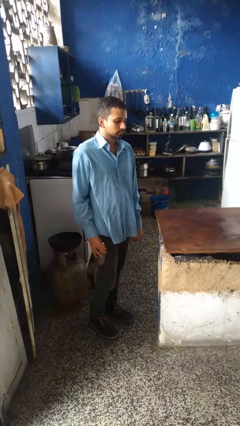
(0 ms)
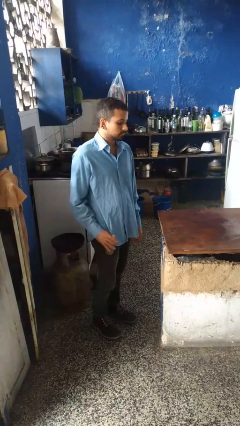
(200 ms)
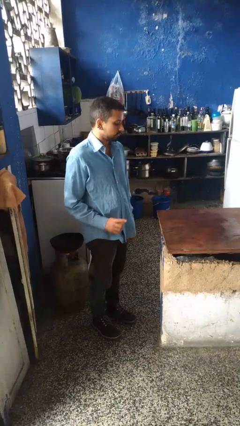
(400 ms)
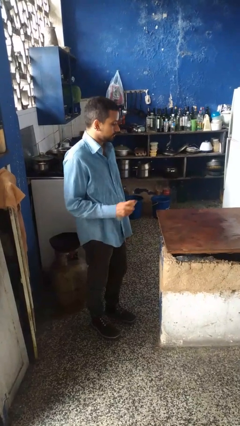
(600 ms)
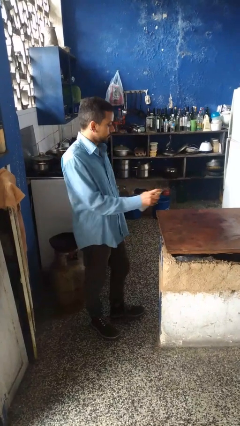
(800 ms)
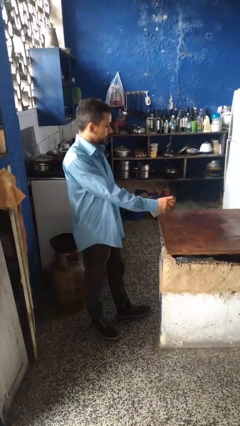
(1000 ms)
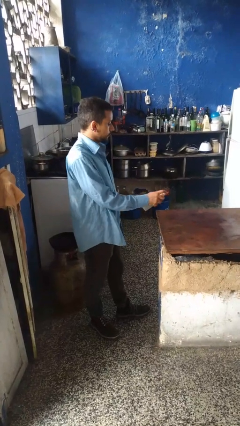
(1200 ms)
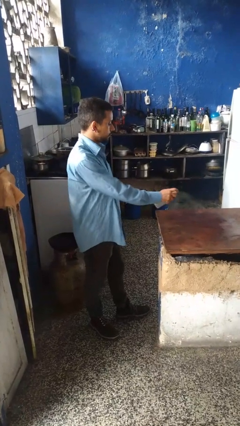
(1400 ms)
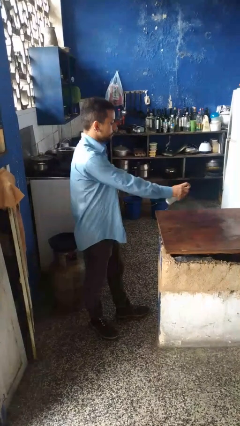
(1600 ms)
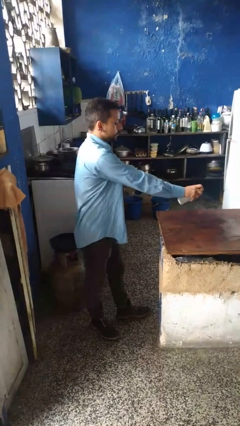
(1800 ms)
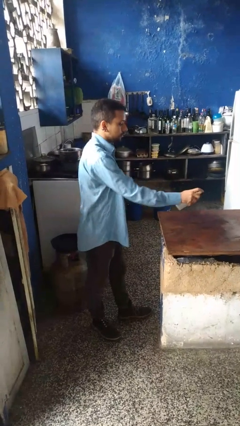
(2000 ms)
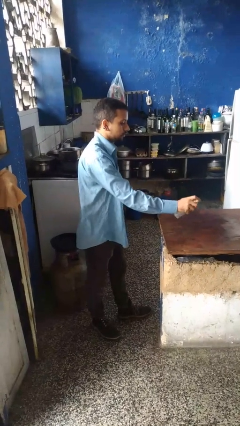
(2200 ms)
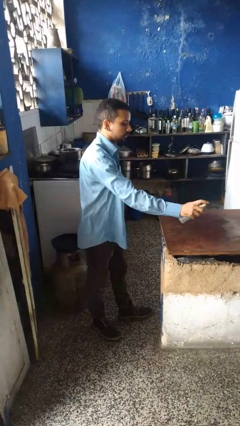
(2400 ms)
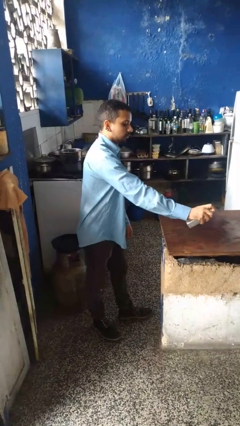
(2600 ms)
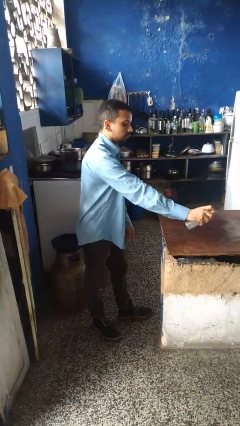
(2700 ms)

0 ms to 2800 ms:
person sprays from bottle

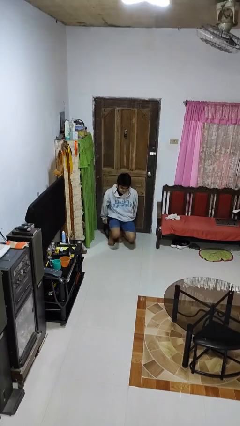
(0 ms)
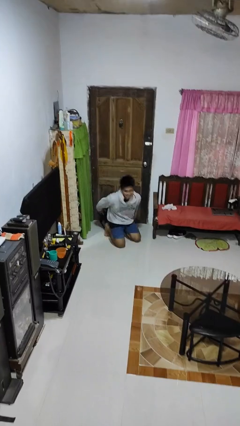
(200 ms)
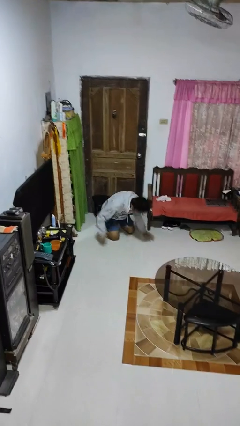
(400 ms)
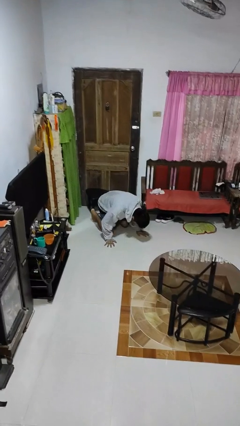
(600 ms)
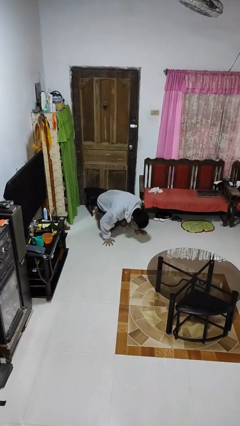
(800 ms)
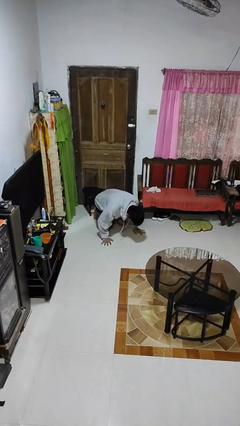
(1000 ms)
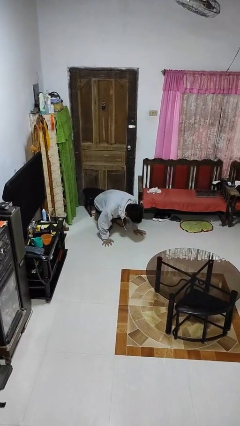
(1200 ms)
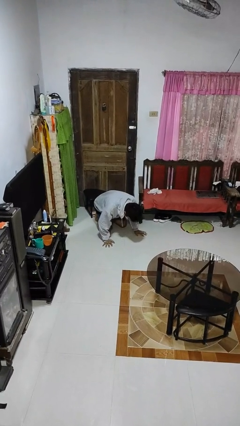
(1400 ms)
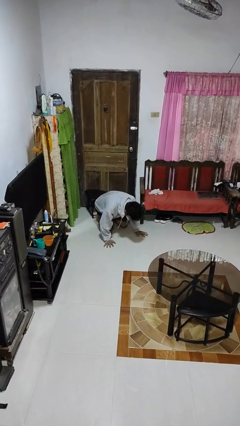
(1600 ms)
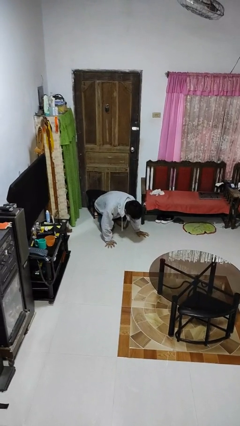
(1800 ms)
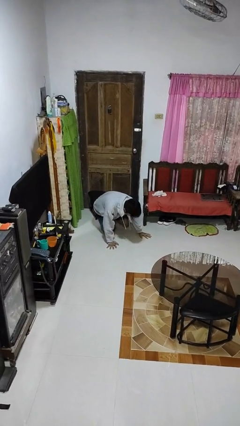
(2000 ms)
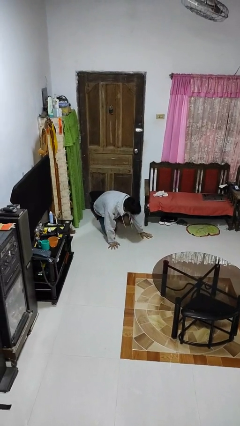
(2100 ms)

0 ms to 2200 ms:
person falls from chair

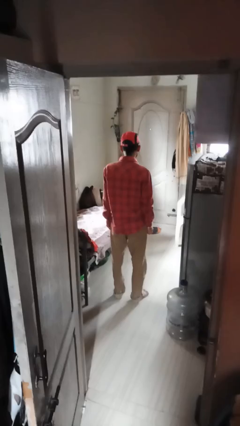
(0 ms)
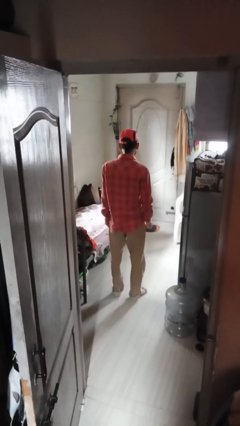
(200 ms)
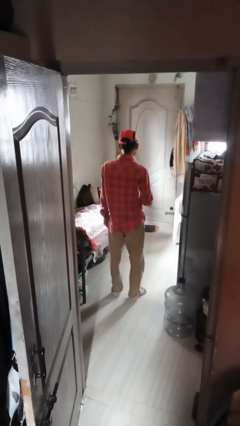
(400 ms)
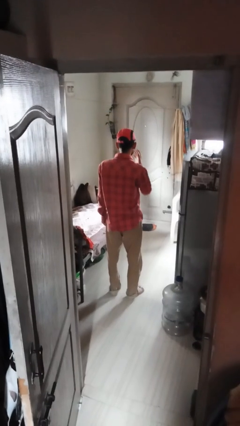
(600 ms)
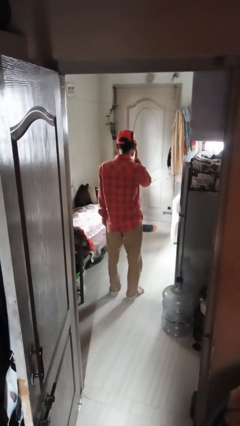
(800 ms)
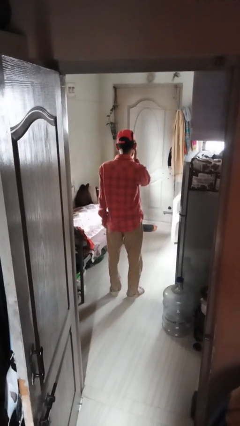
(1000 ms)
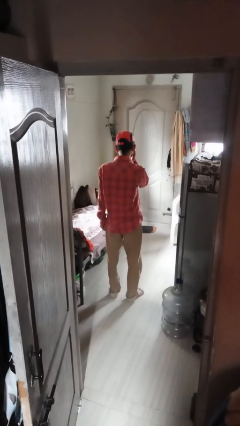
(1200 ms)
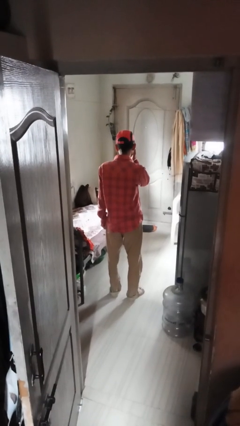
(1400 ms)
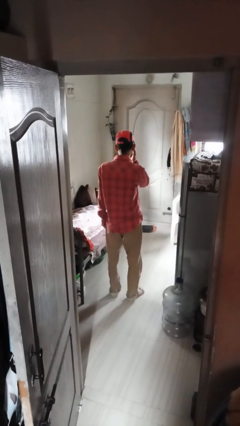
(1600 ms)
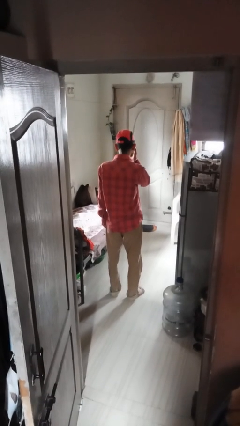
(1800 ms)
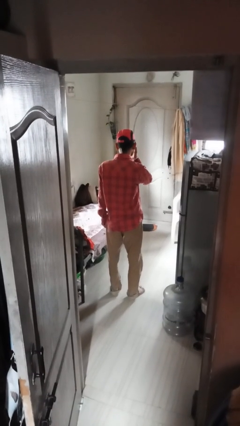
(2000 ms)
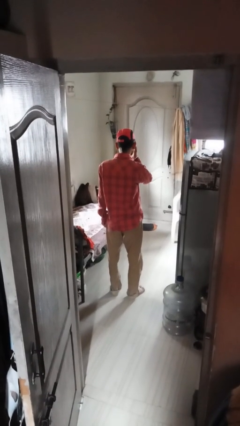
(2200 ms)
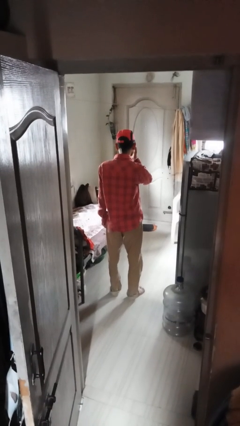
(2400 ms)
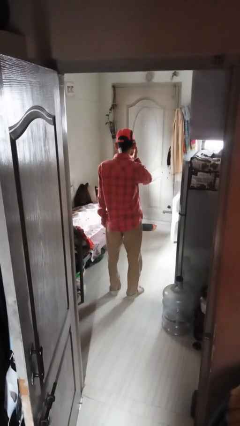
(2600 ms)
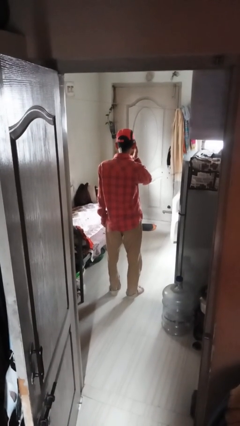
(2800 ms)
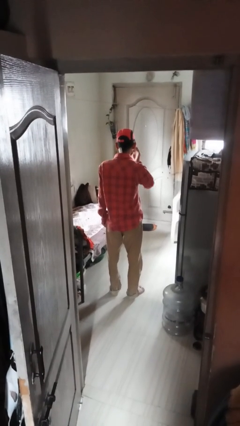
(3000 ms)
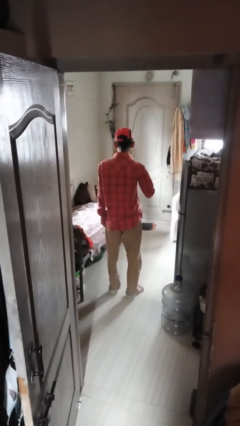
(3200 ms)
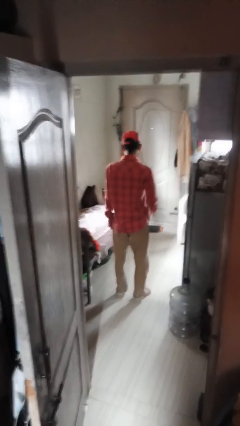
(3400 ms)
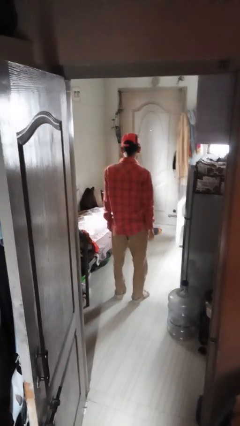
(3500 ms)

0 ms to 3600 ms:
person scratches face

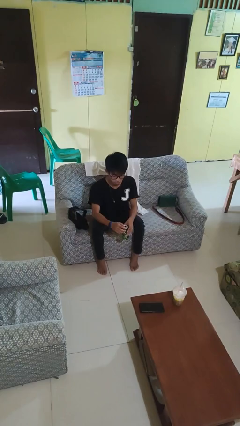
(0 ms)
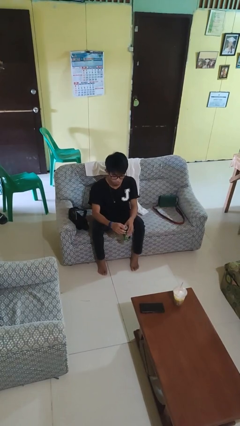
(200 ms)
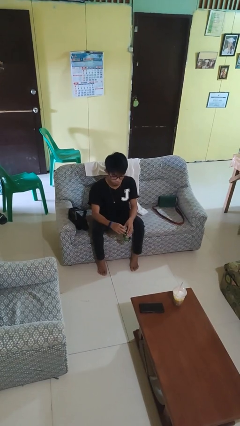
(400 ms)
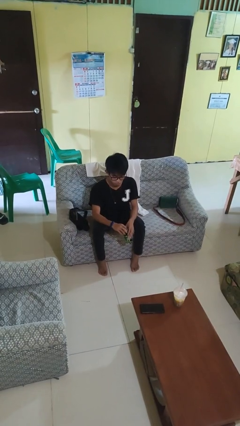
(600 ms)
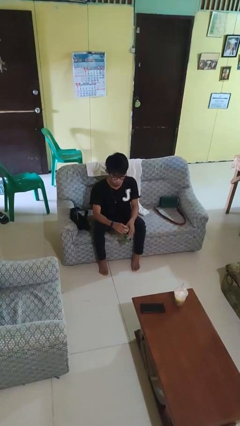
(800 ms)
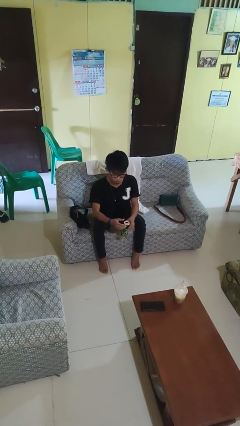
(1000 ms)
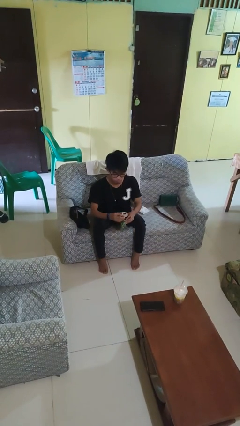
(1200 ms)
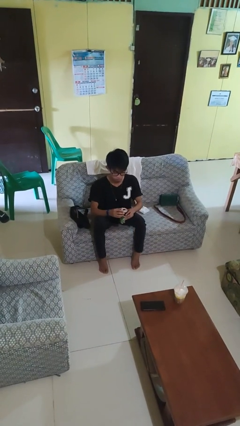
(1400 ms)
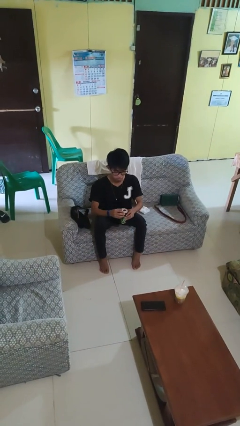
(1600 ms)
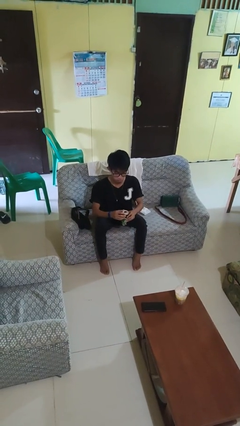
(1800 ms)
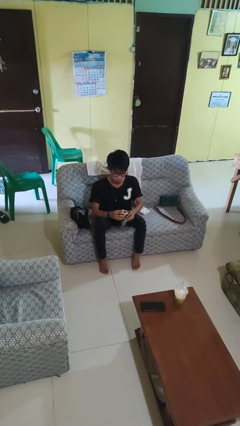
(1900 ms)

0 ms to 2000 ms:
person opens beverage can

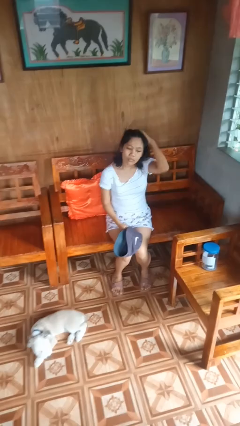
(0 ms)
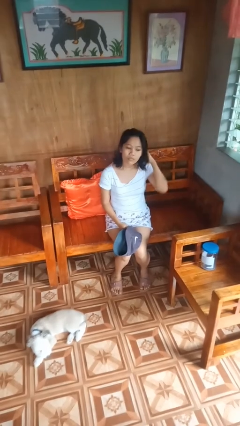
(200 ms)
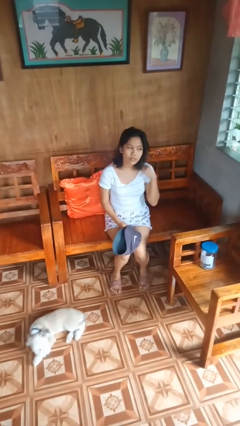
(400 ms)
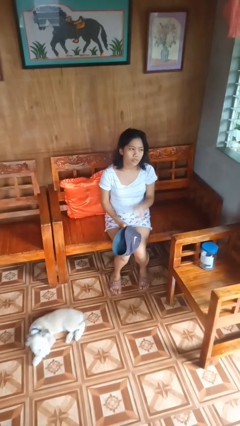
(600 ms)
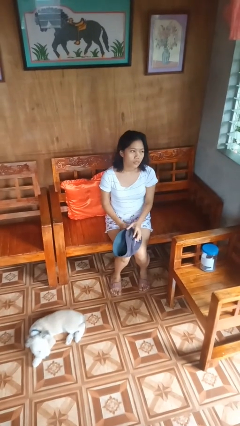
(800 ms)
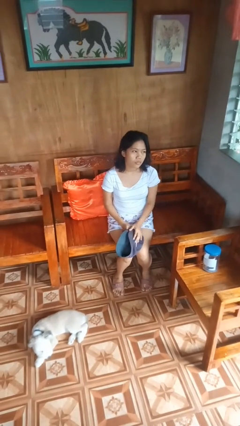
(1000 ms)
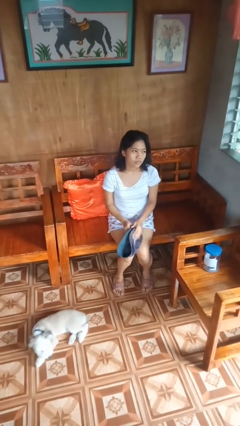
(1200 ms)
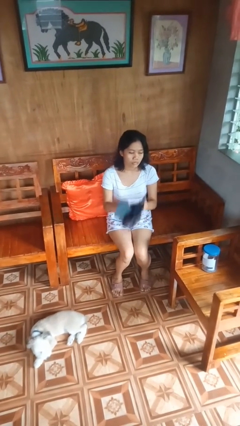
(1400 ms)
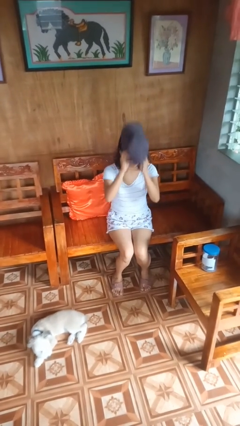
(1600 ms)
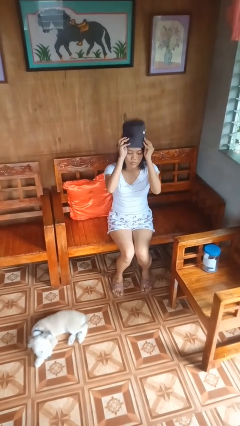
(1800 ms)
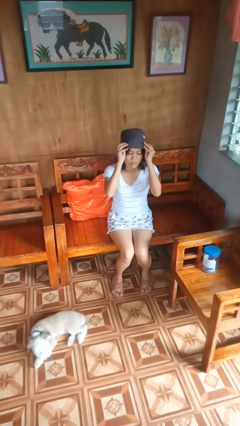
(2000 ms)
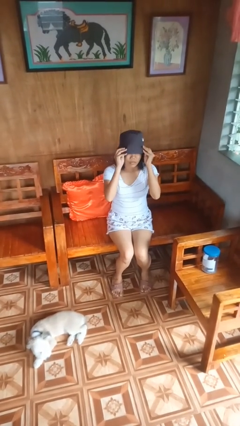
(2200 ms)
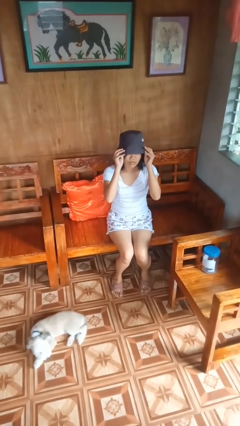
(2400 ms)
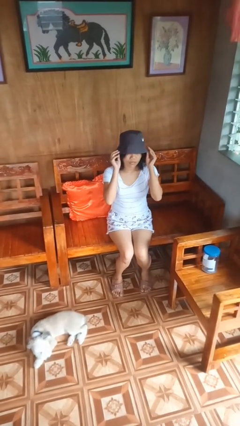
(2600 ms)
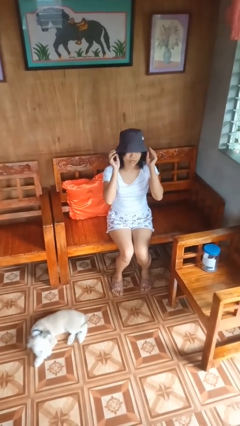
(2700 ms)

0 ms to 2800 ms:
person puts on hat

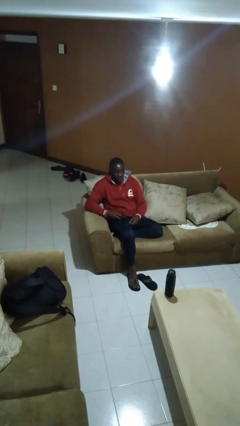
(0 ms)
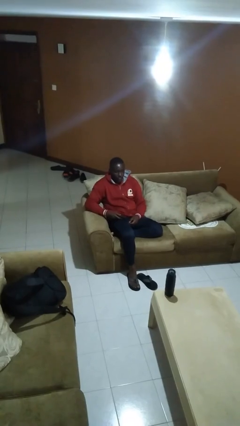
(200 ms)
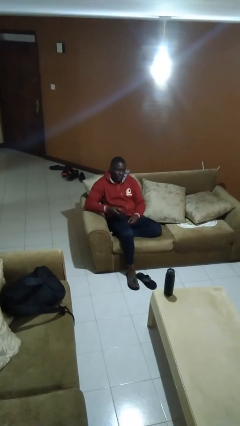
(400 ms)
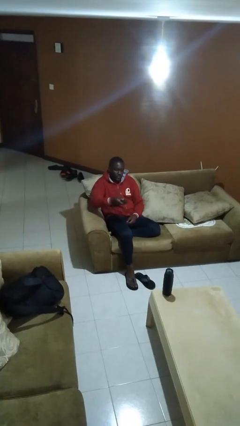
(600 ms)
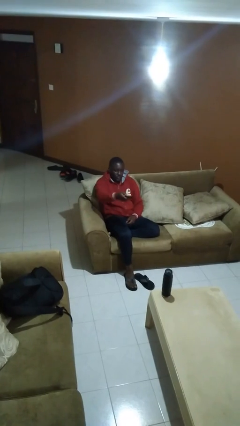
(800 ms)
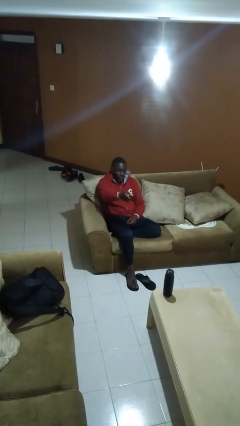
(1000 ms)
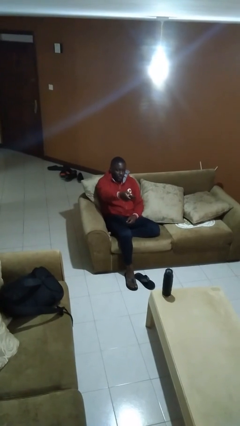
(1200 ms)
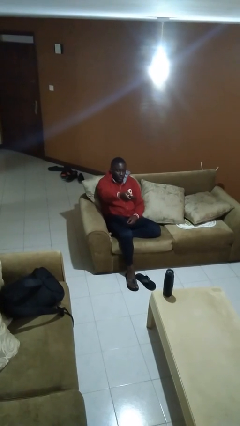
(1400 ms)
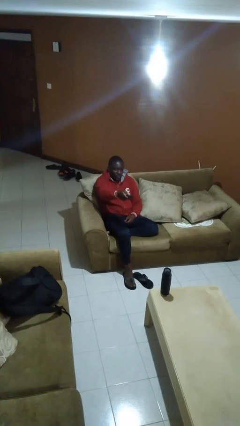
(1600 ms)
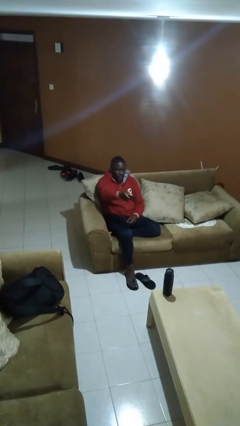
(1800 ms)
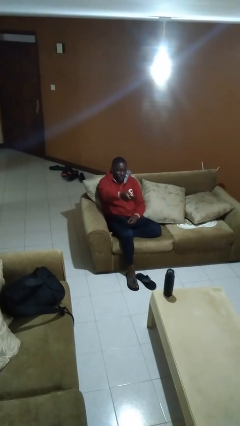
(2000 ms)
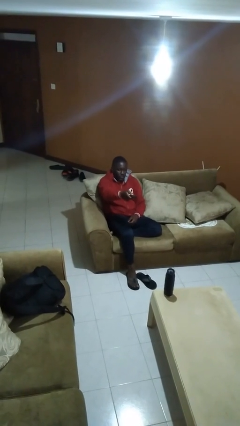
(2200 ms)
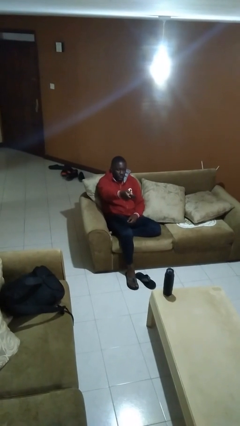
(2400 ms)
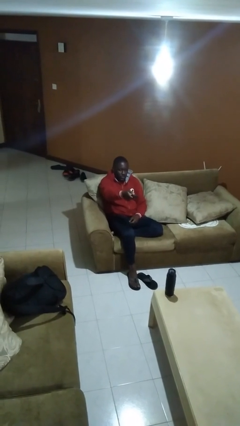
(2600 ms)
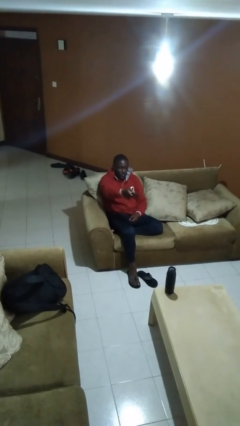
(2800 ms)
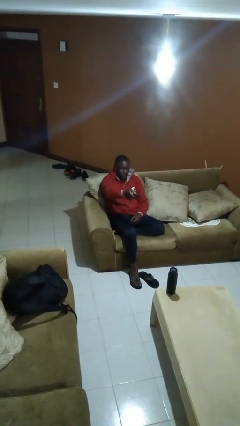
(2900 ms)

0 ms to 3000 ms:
person uses television remote

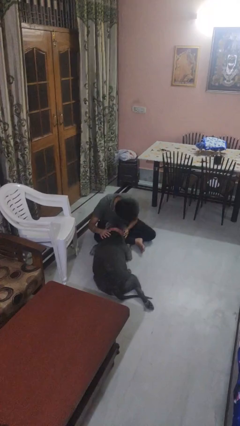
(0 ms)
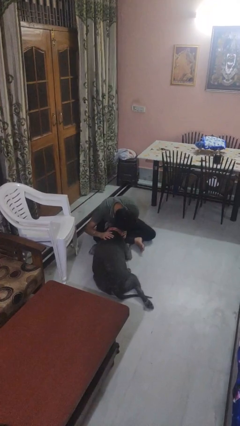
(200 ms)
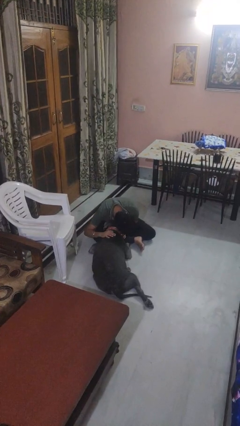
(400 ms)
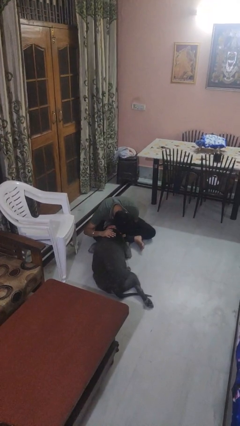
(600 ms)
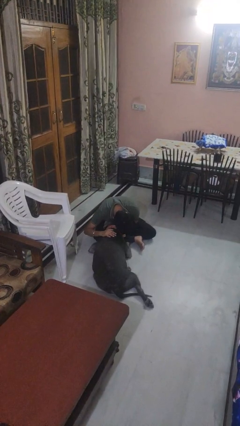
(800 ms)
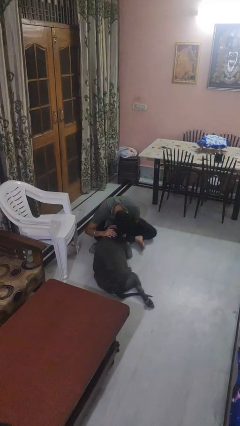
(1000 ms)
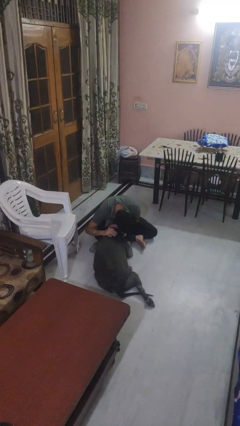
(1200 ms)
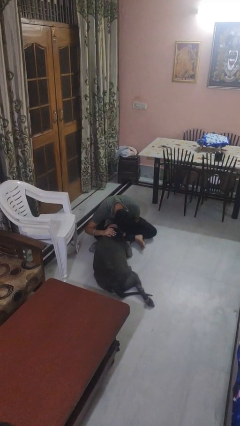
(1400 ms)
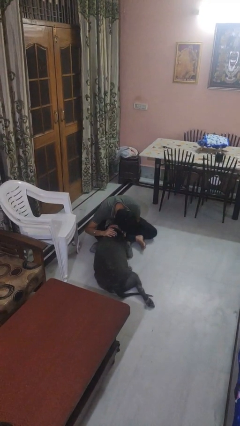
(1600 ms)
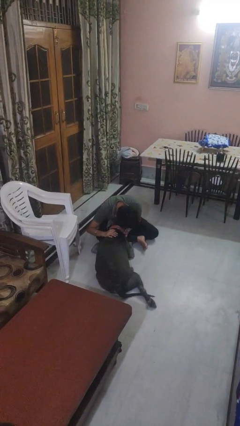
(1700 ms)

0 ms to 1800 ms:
person hugs dog
